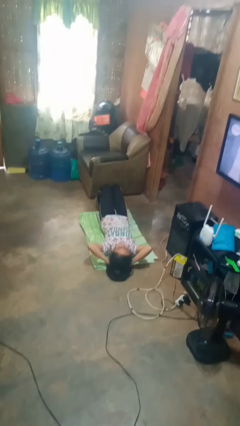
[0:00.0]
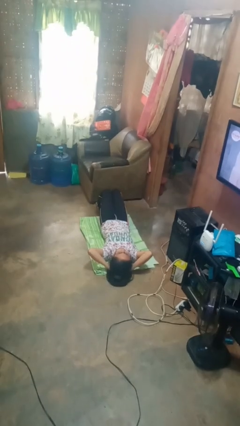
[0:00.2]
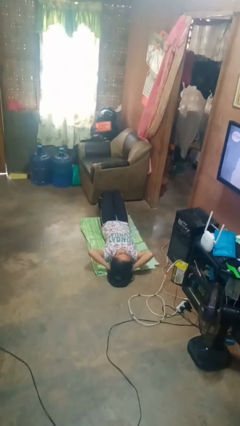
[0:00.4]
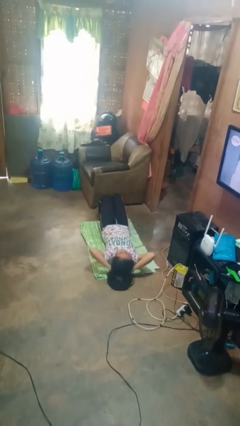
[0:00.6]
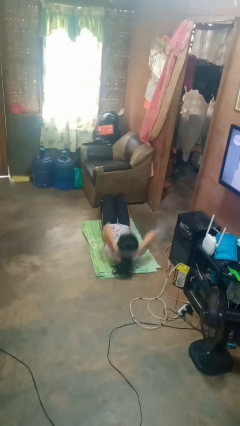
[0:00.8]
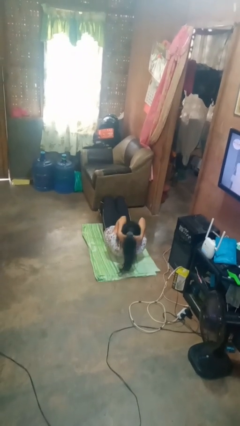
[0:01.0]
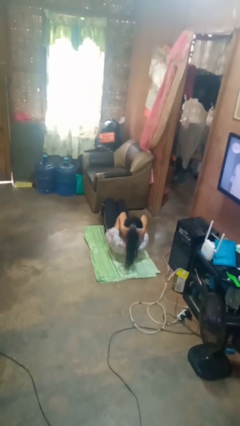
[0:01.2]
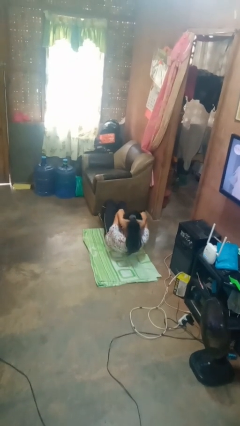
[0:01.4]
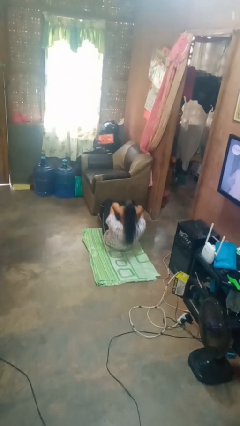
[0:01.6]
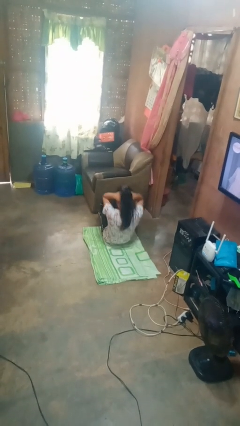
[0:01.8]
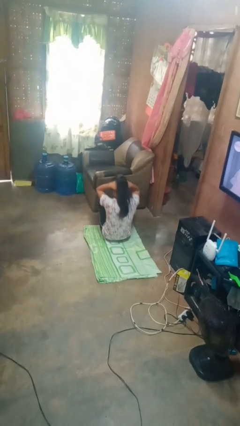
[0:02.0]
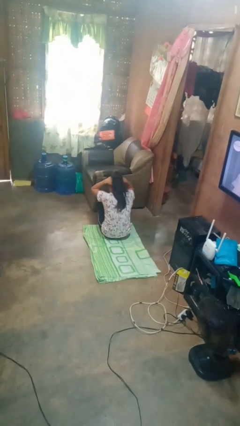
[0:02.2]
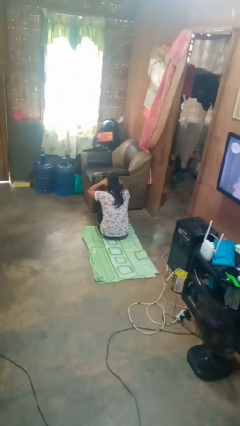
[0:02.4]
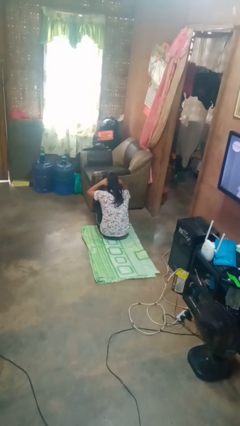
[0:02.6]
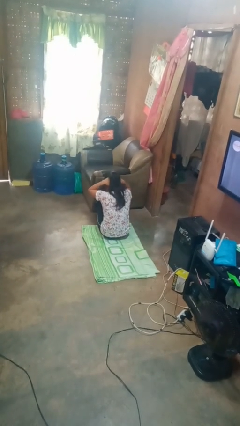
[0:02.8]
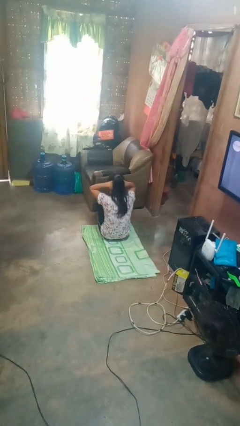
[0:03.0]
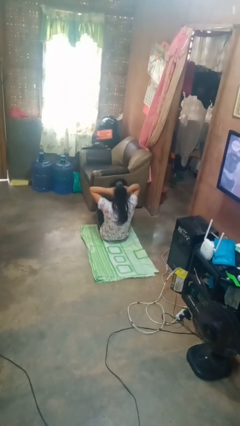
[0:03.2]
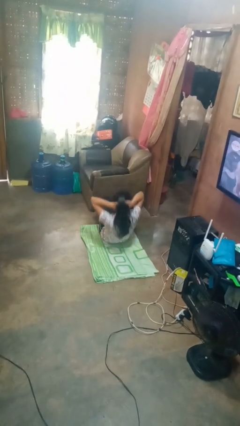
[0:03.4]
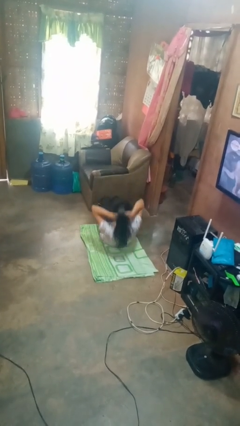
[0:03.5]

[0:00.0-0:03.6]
person exercises with situp

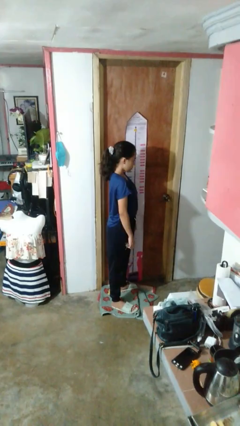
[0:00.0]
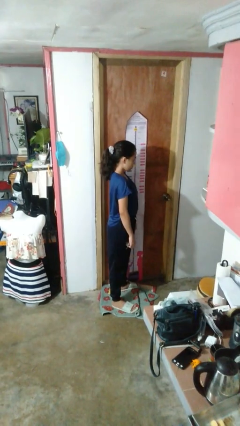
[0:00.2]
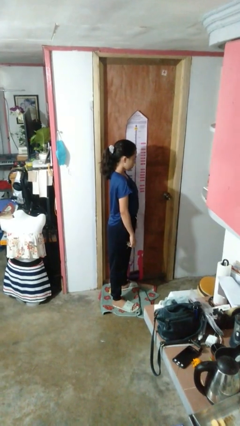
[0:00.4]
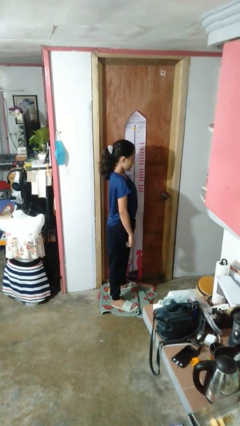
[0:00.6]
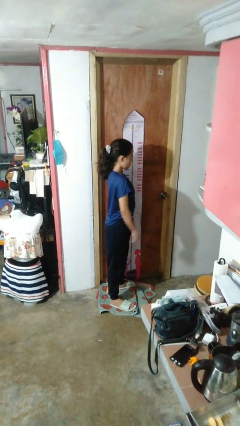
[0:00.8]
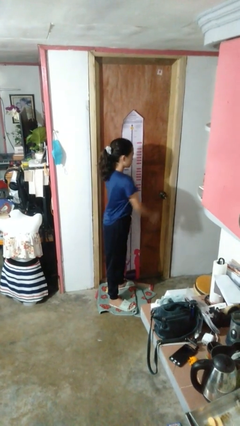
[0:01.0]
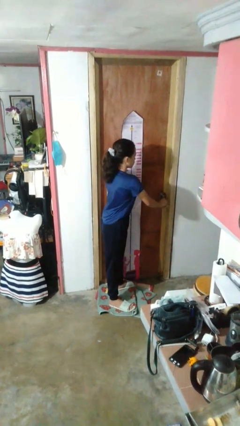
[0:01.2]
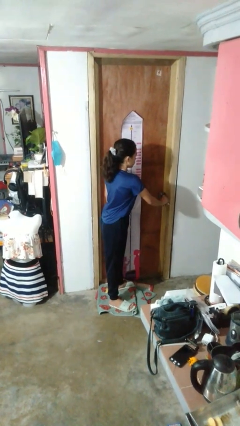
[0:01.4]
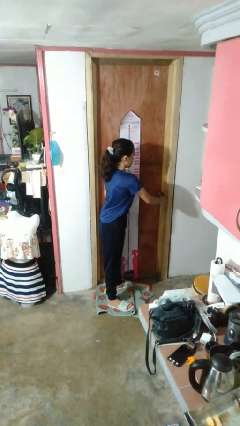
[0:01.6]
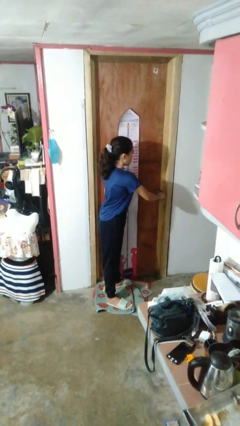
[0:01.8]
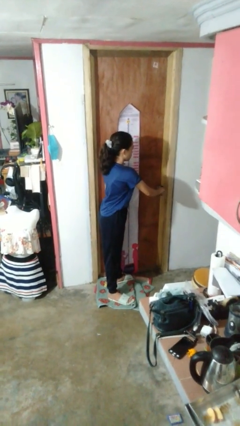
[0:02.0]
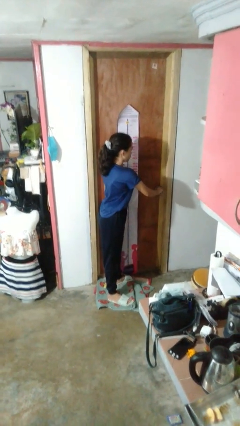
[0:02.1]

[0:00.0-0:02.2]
person unlocks door with keys

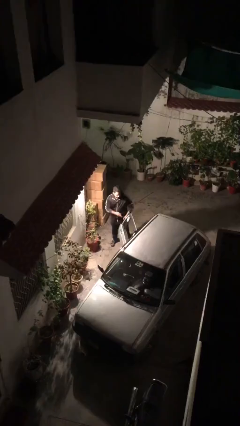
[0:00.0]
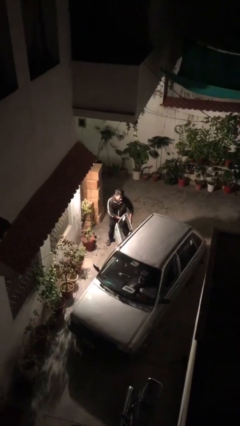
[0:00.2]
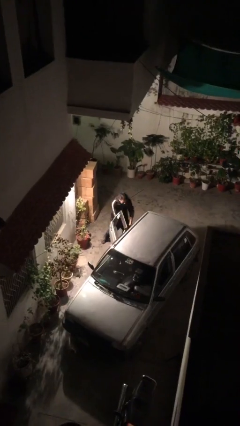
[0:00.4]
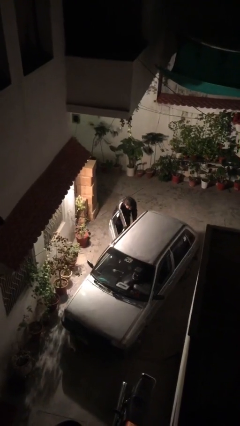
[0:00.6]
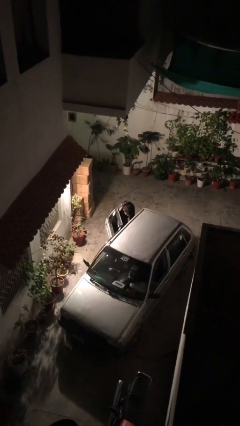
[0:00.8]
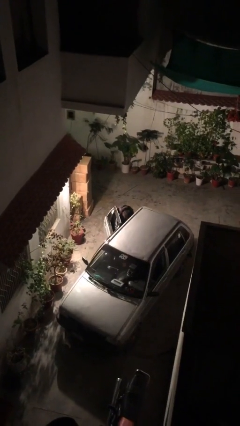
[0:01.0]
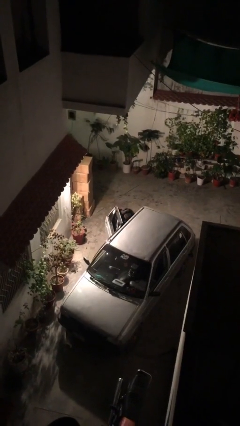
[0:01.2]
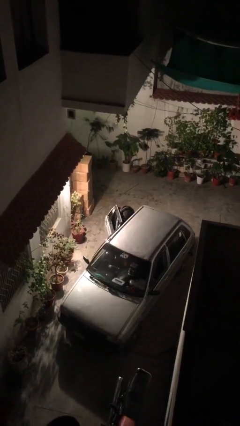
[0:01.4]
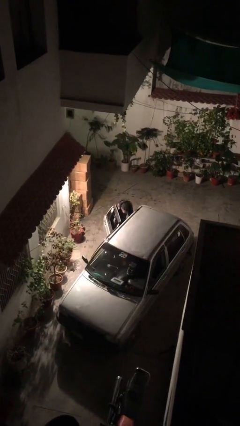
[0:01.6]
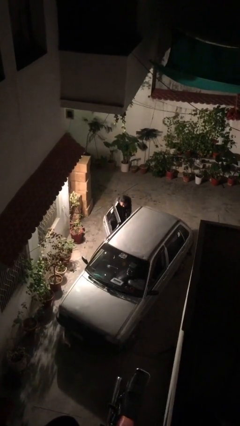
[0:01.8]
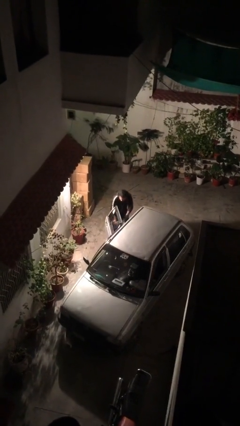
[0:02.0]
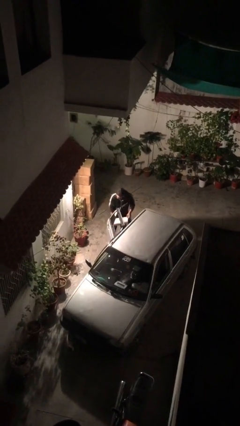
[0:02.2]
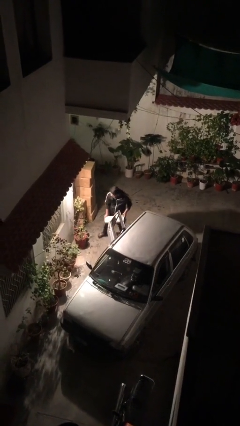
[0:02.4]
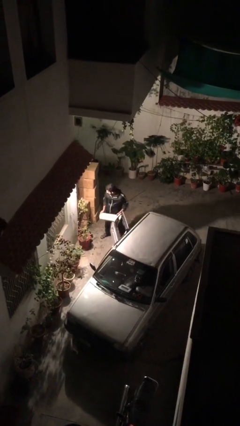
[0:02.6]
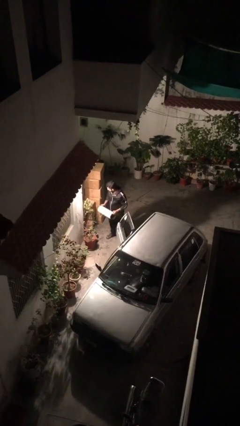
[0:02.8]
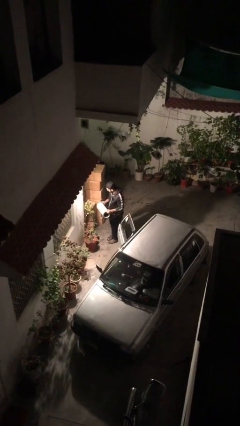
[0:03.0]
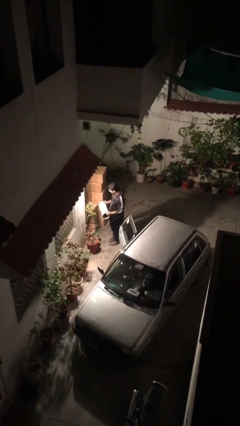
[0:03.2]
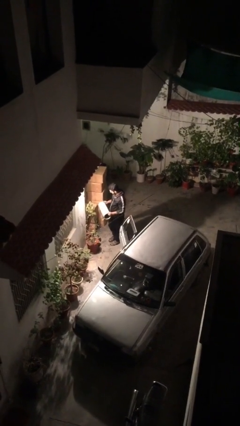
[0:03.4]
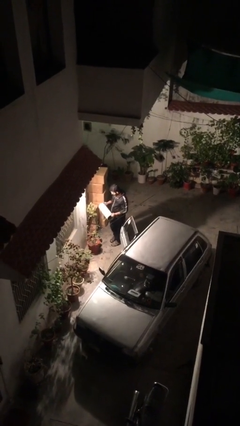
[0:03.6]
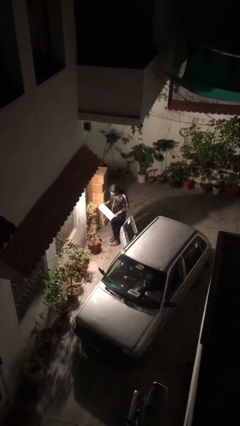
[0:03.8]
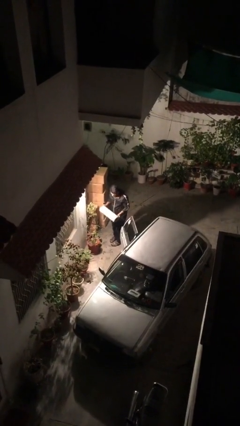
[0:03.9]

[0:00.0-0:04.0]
person unloads car

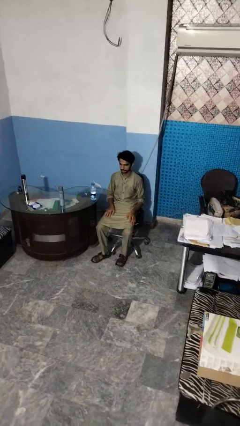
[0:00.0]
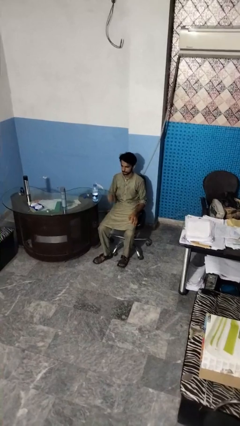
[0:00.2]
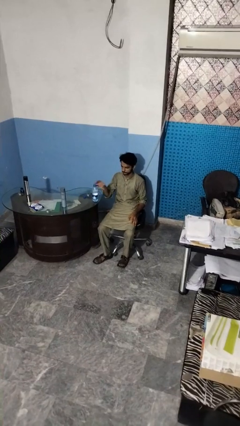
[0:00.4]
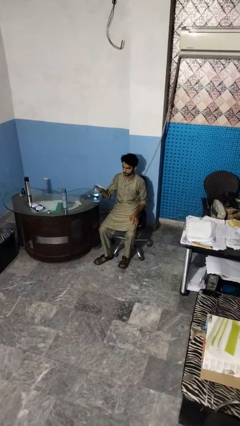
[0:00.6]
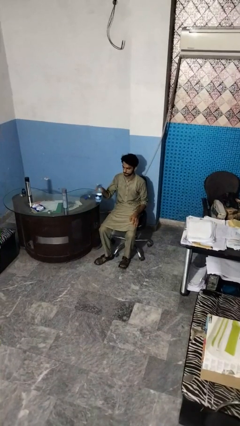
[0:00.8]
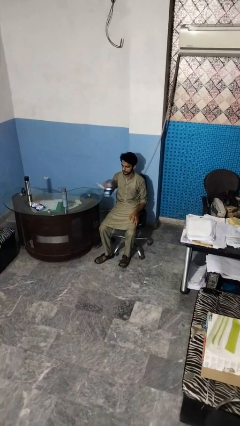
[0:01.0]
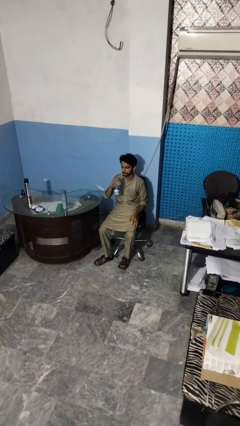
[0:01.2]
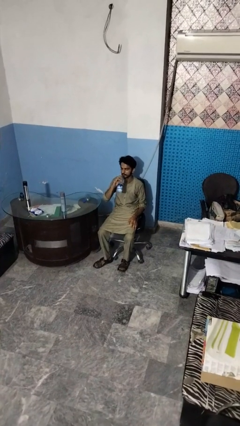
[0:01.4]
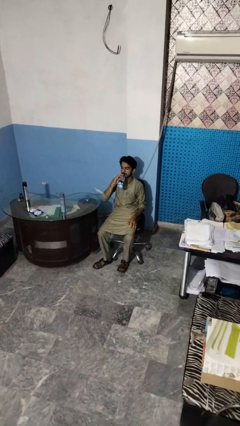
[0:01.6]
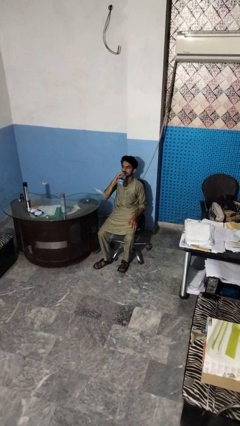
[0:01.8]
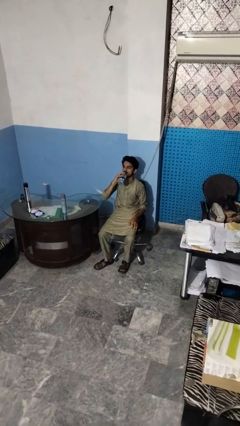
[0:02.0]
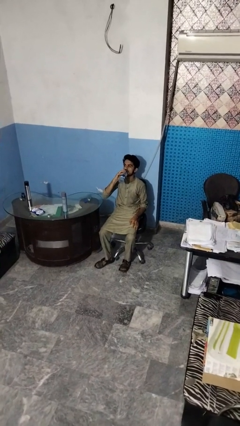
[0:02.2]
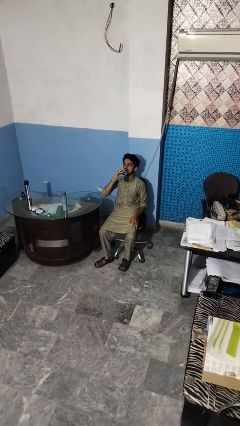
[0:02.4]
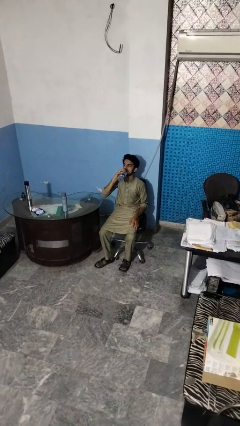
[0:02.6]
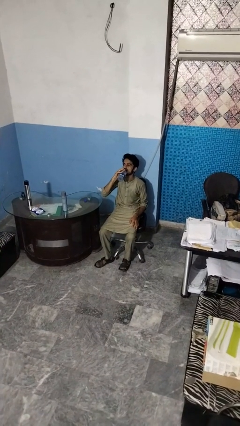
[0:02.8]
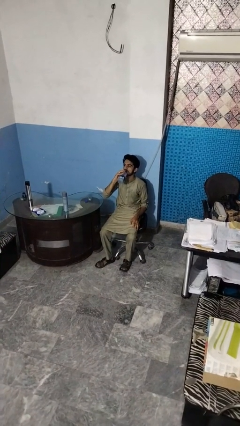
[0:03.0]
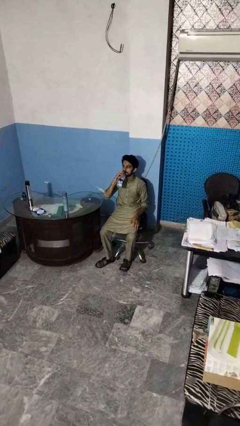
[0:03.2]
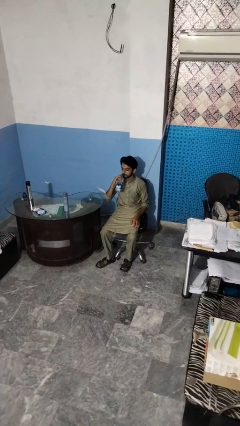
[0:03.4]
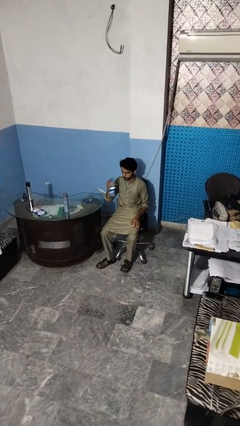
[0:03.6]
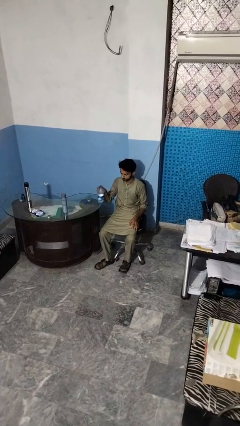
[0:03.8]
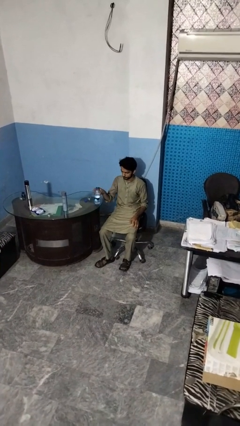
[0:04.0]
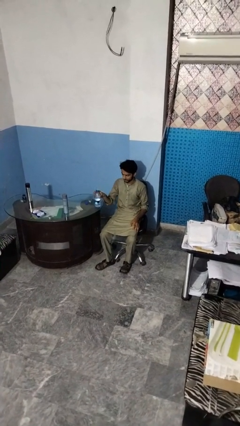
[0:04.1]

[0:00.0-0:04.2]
person drinks from bottle

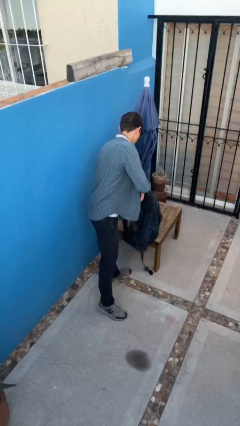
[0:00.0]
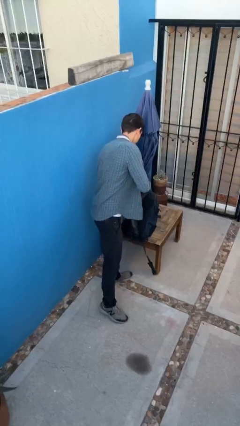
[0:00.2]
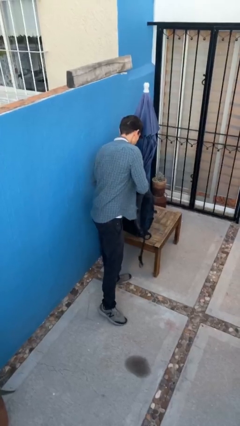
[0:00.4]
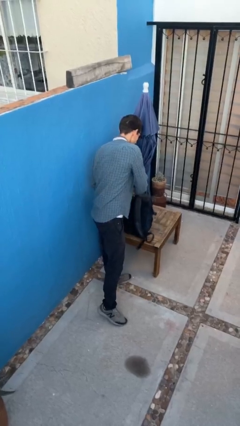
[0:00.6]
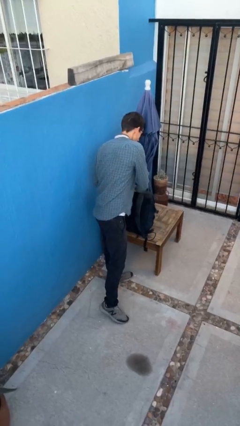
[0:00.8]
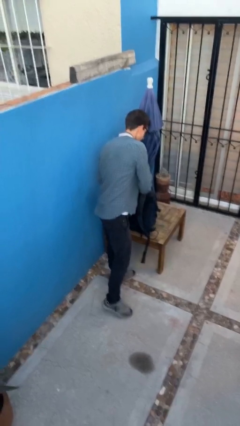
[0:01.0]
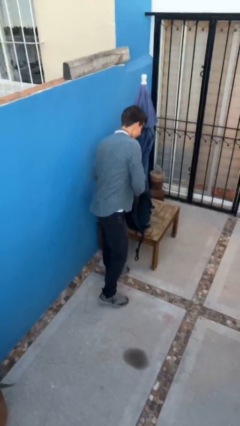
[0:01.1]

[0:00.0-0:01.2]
person puts down object on table

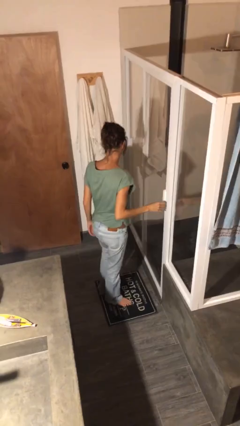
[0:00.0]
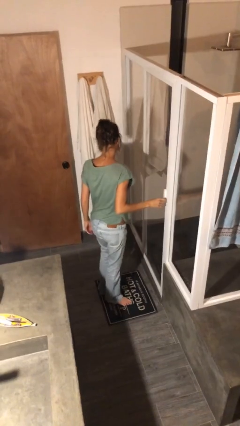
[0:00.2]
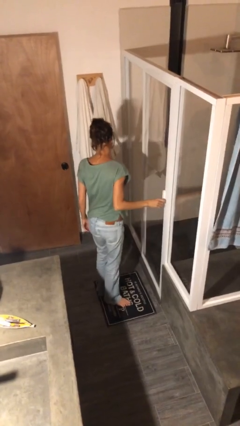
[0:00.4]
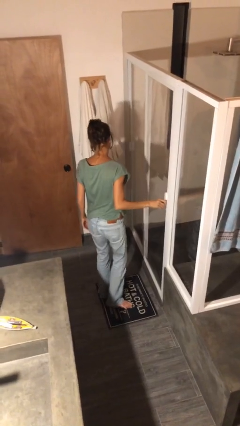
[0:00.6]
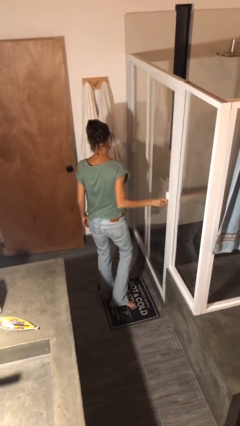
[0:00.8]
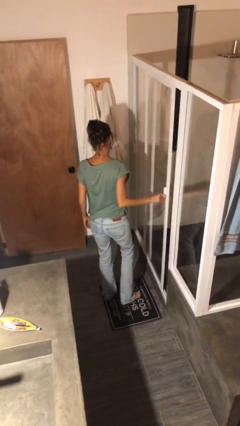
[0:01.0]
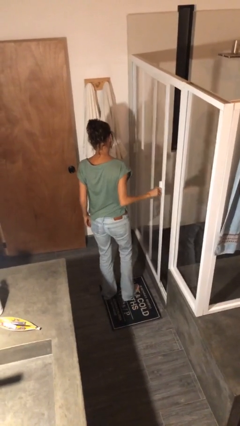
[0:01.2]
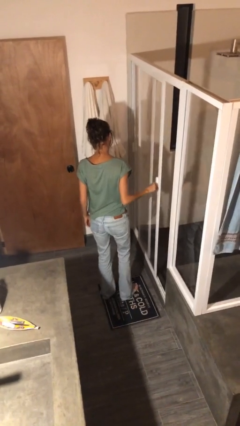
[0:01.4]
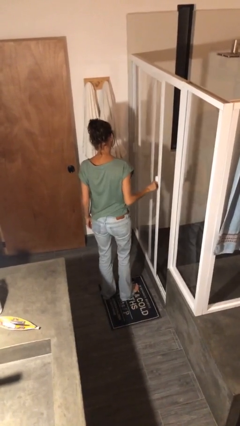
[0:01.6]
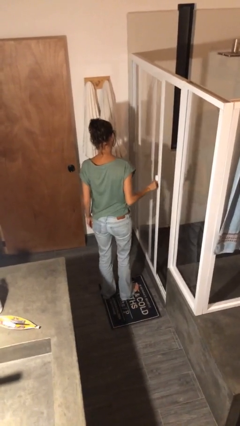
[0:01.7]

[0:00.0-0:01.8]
person opens sliding door

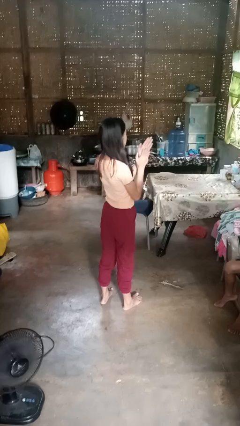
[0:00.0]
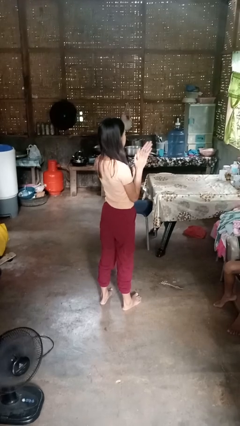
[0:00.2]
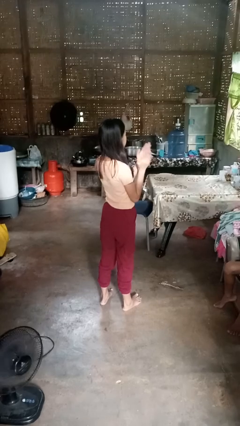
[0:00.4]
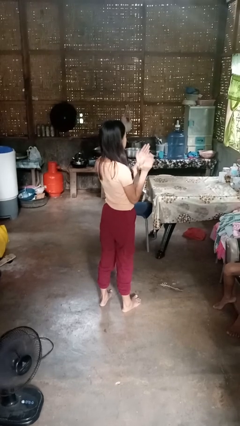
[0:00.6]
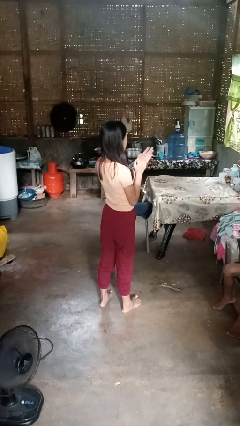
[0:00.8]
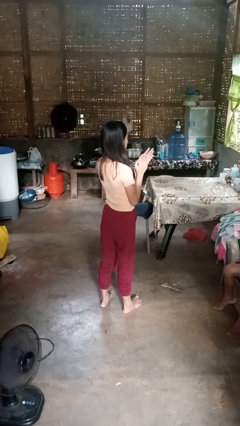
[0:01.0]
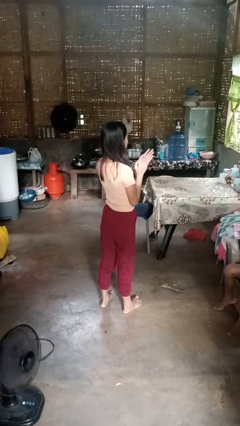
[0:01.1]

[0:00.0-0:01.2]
person claps hands
